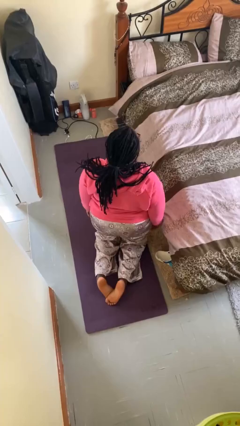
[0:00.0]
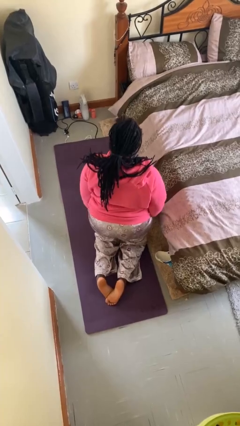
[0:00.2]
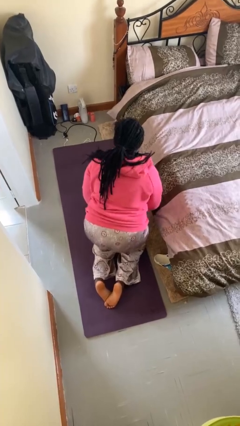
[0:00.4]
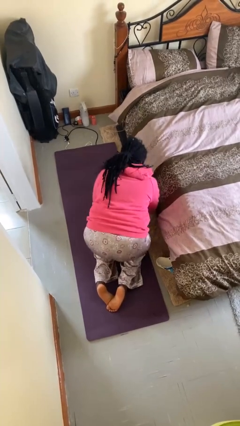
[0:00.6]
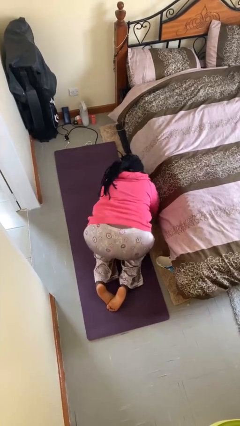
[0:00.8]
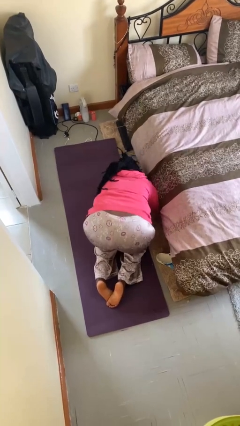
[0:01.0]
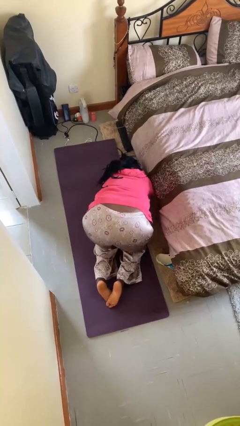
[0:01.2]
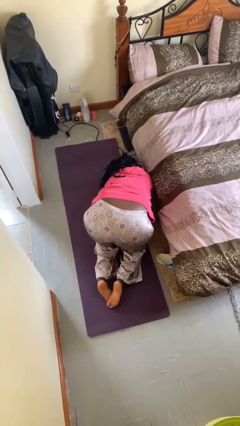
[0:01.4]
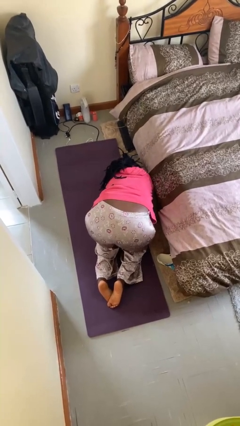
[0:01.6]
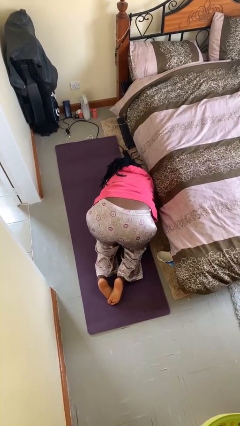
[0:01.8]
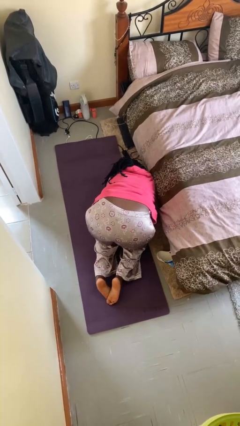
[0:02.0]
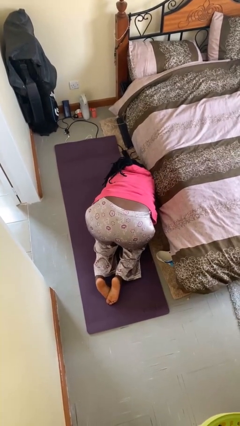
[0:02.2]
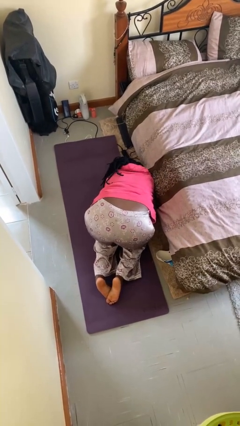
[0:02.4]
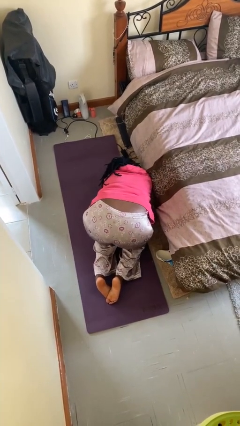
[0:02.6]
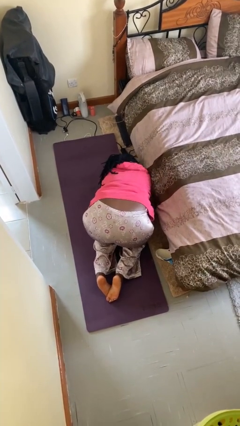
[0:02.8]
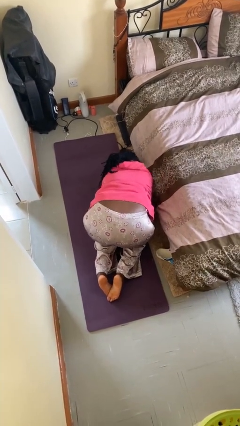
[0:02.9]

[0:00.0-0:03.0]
person searches under bed

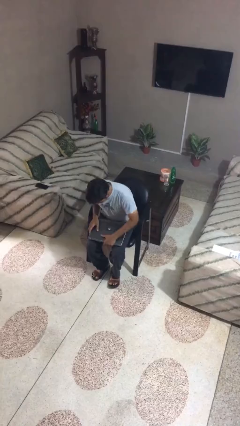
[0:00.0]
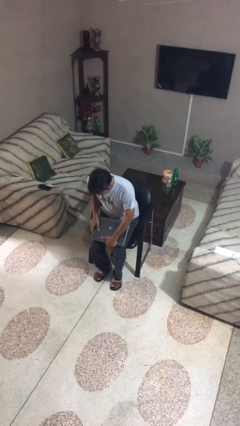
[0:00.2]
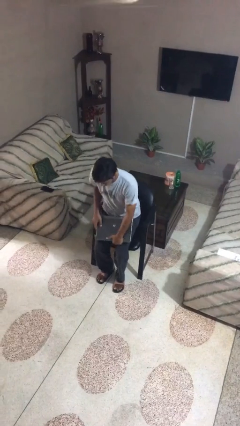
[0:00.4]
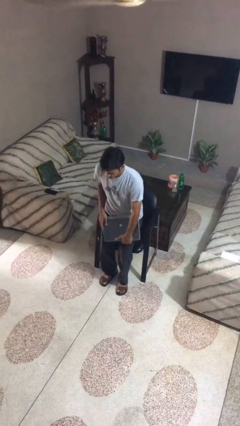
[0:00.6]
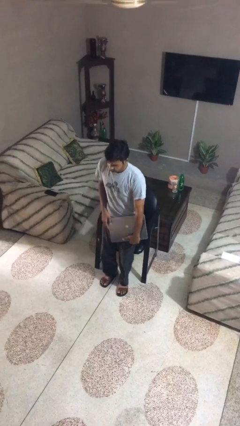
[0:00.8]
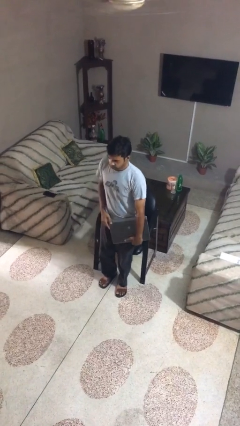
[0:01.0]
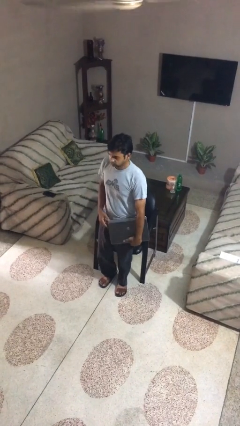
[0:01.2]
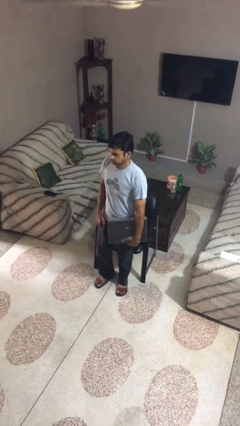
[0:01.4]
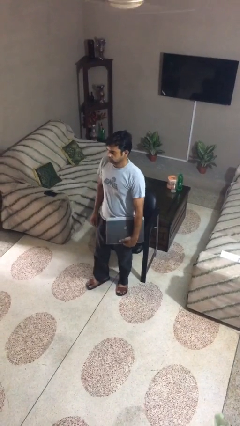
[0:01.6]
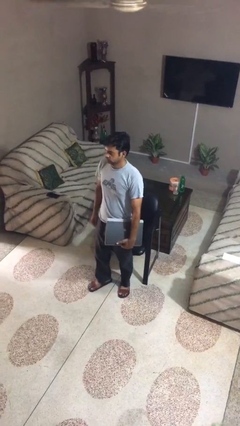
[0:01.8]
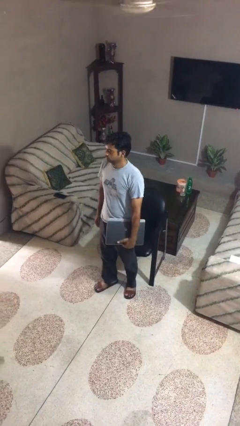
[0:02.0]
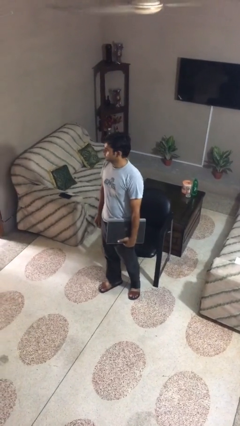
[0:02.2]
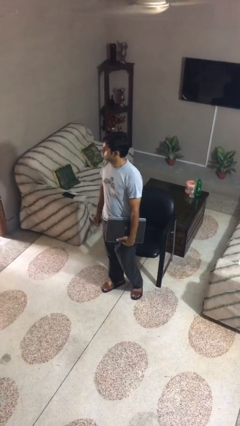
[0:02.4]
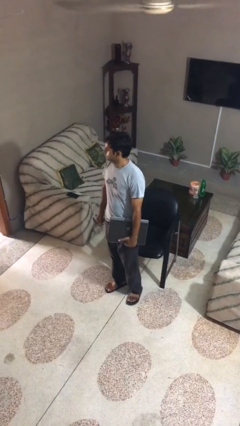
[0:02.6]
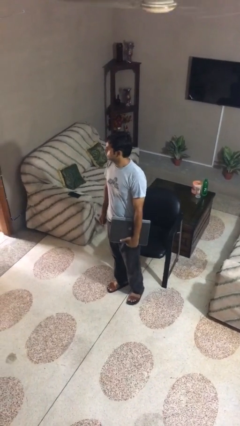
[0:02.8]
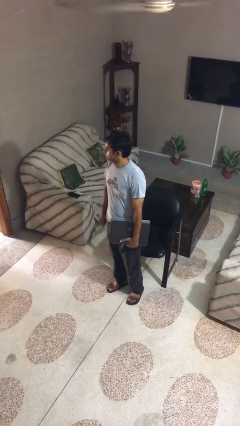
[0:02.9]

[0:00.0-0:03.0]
person stands up

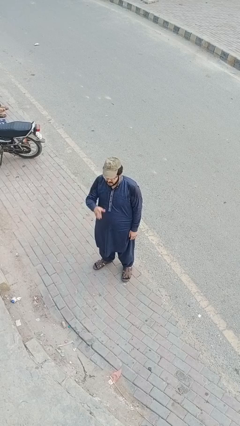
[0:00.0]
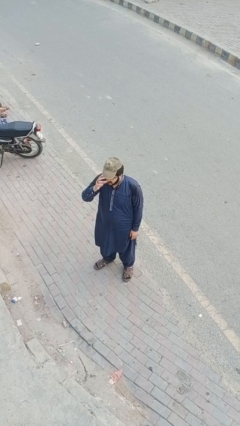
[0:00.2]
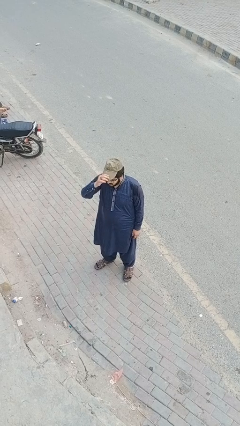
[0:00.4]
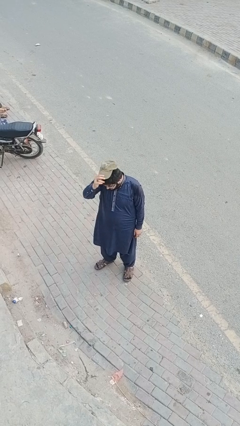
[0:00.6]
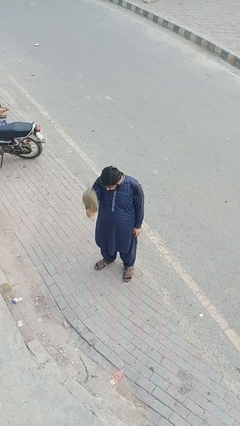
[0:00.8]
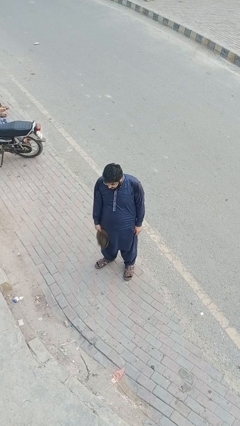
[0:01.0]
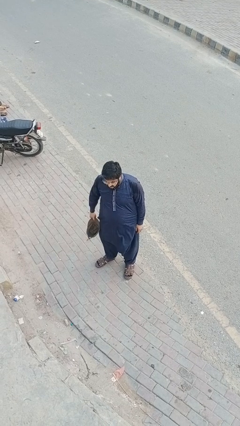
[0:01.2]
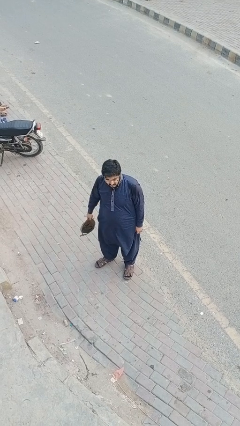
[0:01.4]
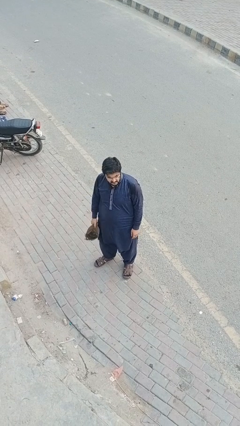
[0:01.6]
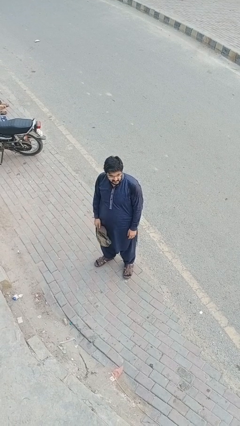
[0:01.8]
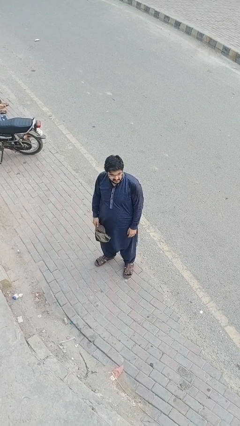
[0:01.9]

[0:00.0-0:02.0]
person takes off hat

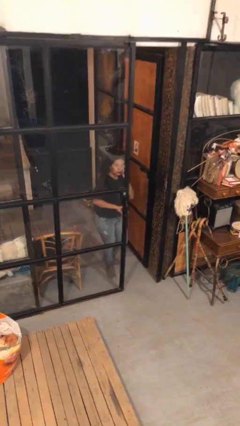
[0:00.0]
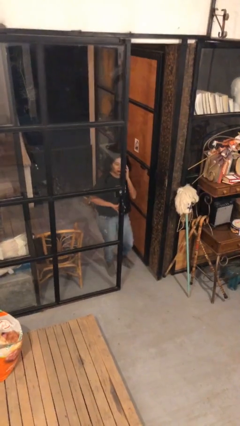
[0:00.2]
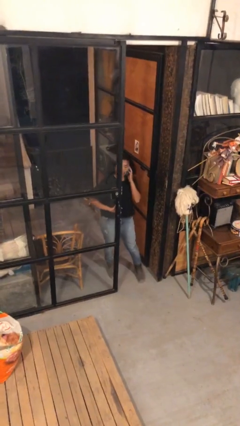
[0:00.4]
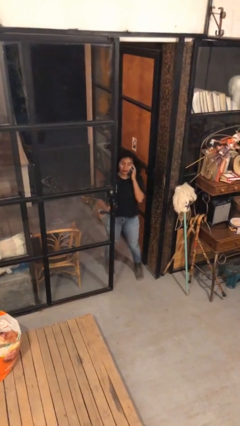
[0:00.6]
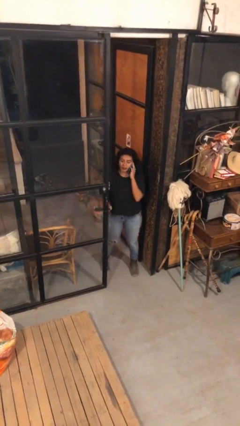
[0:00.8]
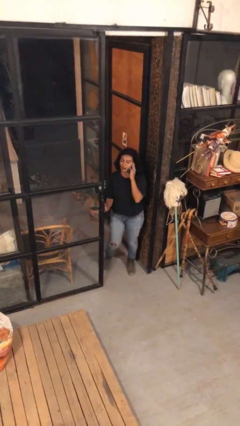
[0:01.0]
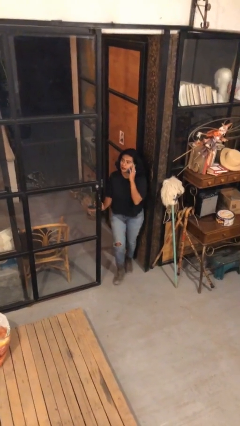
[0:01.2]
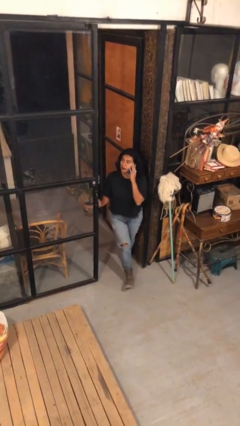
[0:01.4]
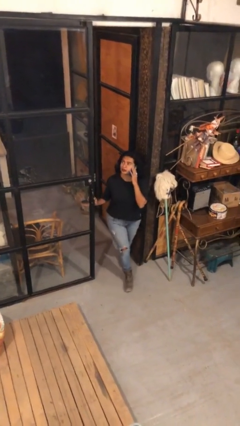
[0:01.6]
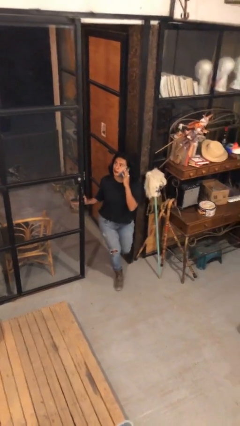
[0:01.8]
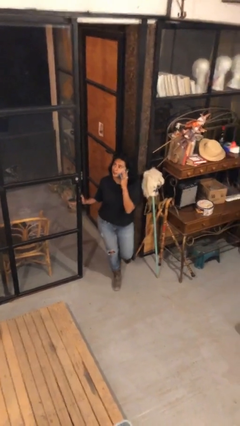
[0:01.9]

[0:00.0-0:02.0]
person enters scene through structure

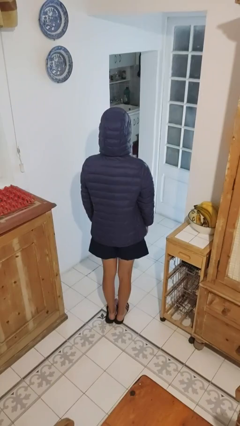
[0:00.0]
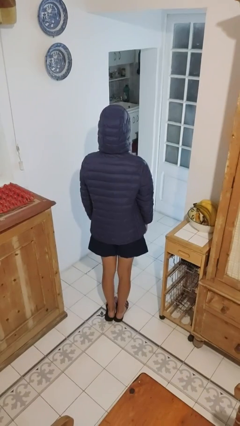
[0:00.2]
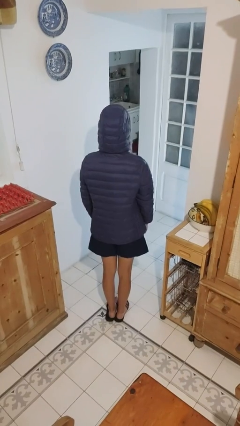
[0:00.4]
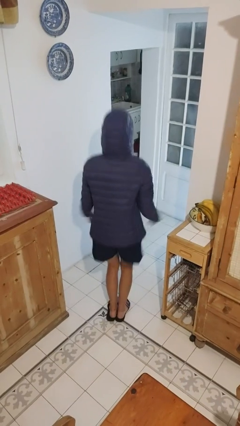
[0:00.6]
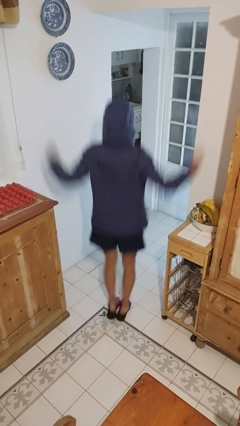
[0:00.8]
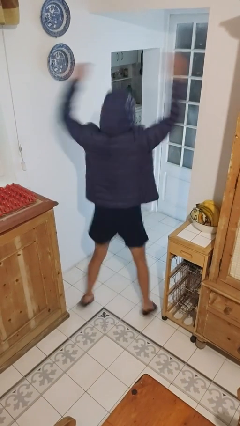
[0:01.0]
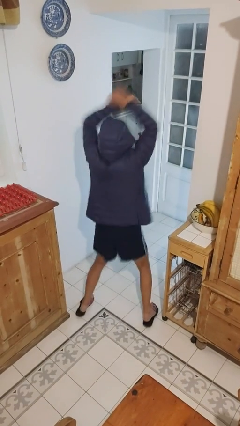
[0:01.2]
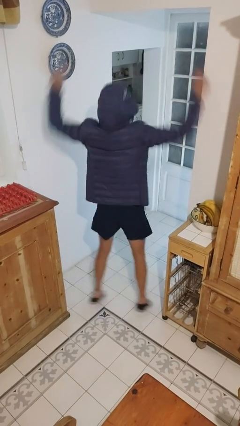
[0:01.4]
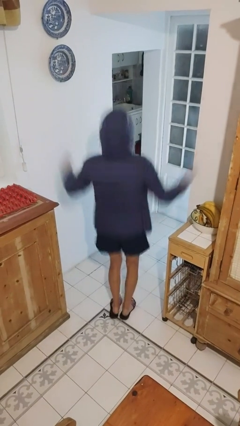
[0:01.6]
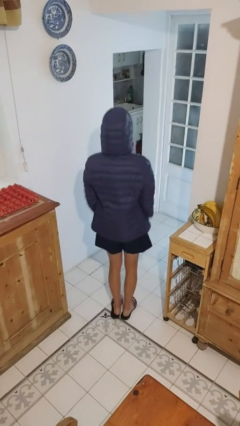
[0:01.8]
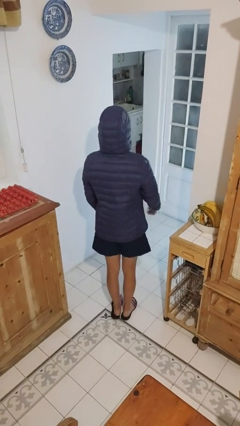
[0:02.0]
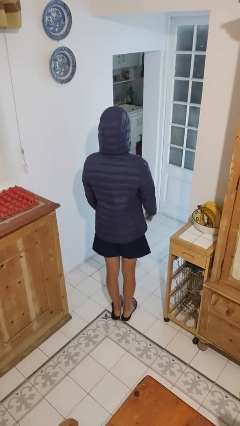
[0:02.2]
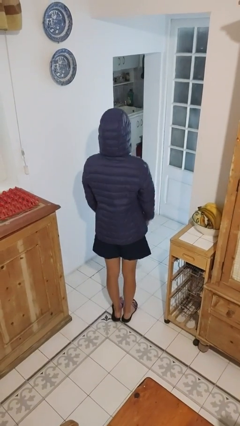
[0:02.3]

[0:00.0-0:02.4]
person exercises with jumping jacks

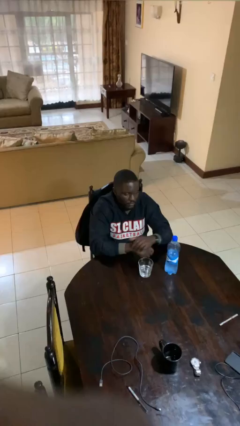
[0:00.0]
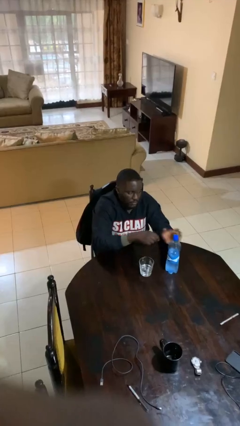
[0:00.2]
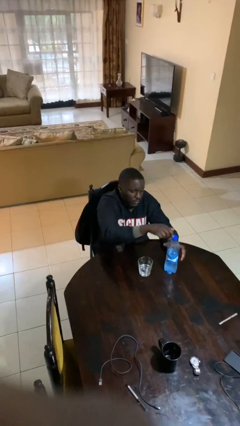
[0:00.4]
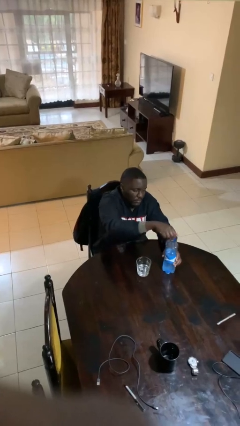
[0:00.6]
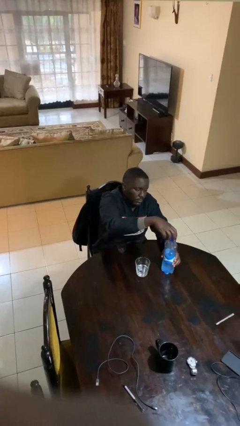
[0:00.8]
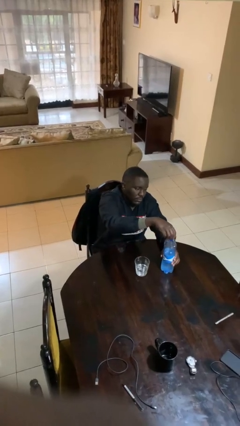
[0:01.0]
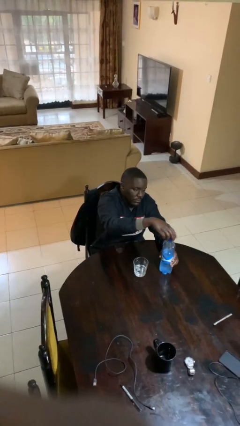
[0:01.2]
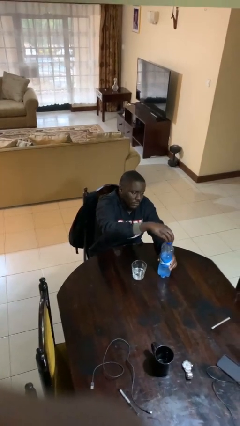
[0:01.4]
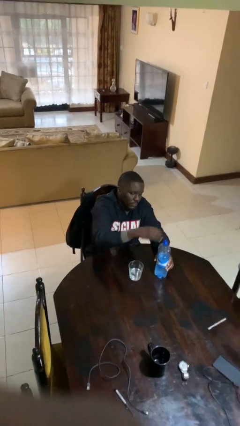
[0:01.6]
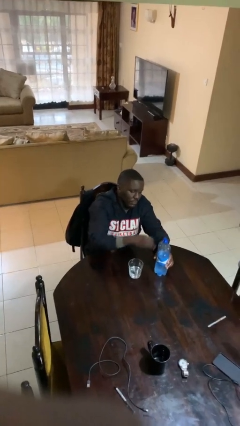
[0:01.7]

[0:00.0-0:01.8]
person unscrews lid from bottle

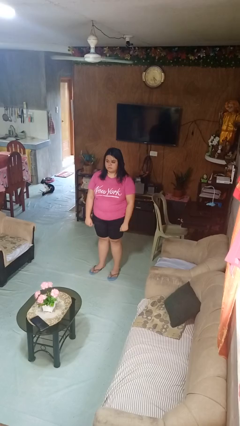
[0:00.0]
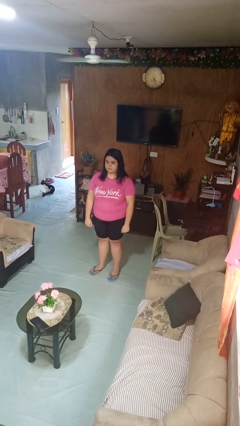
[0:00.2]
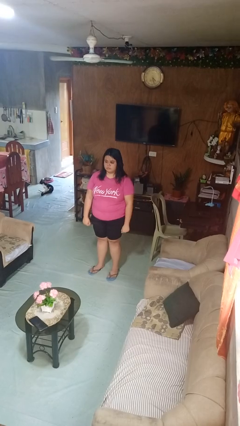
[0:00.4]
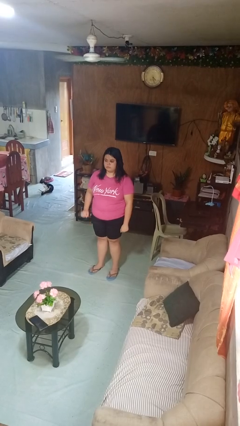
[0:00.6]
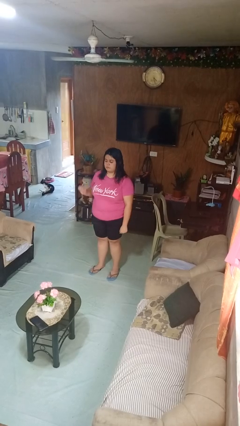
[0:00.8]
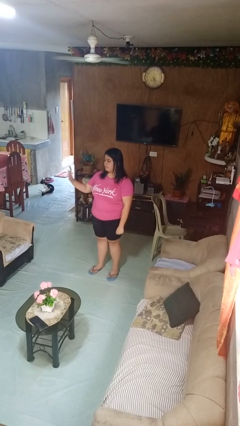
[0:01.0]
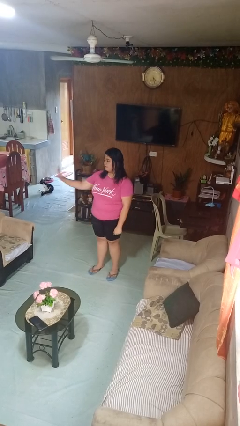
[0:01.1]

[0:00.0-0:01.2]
person gestures stop

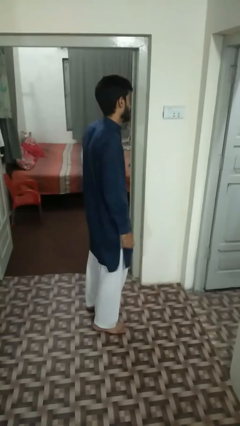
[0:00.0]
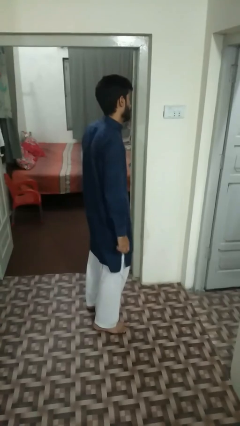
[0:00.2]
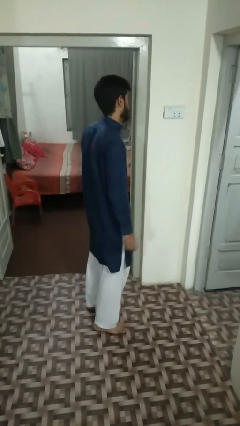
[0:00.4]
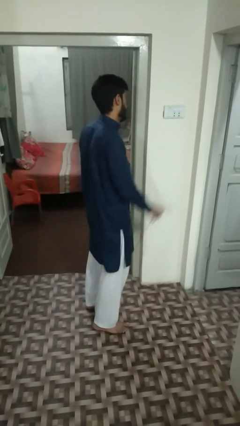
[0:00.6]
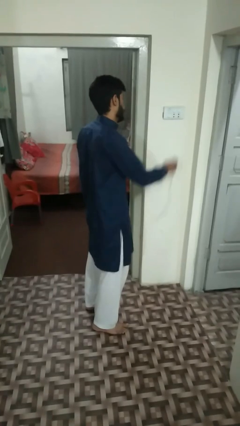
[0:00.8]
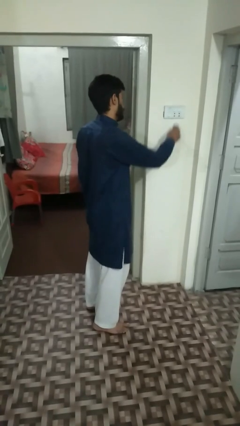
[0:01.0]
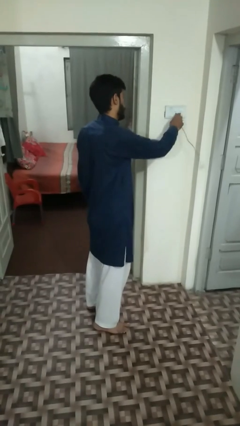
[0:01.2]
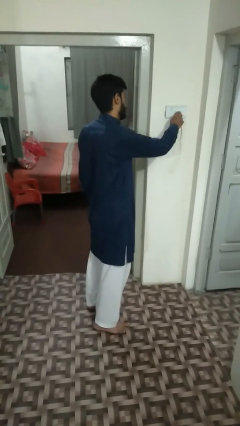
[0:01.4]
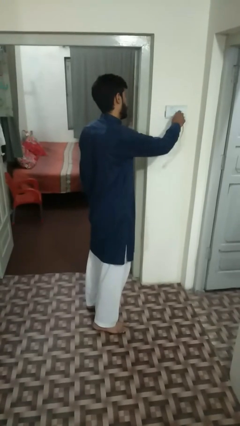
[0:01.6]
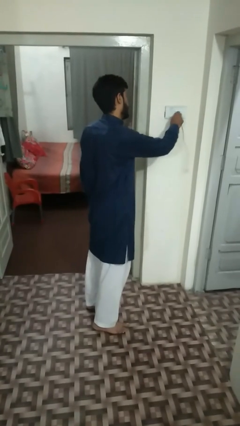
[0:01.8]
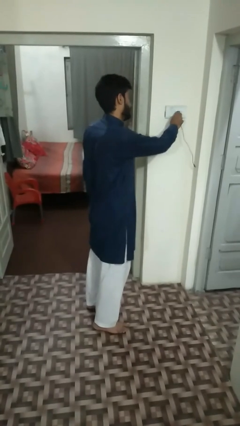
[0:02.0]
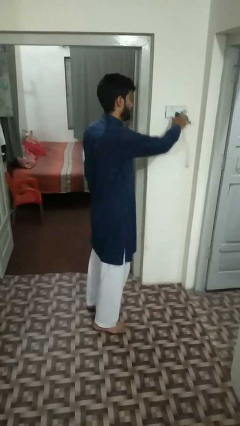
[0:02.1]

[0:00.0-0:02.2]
person plugs into electrical socket
